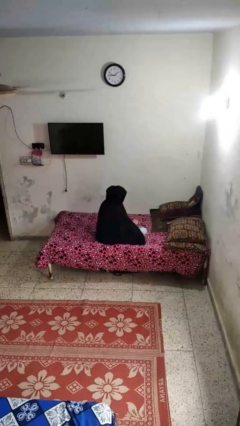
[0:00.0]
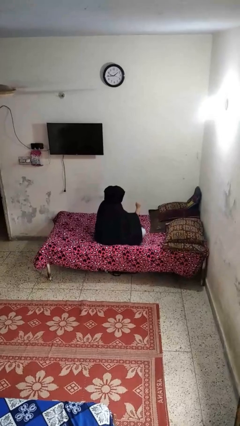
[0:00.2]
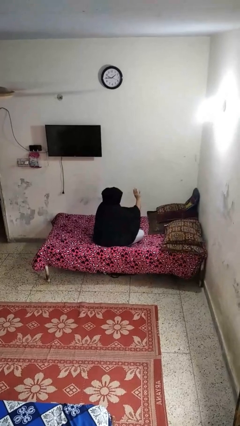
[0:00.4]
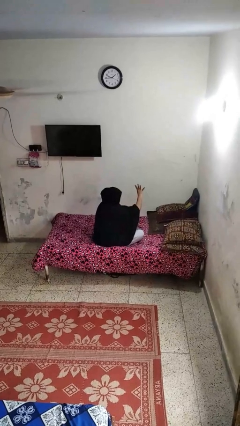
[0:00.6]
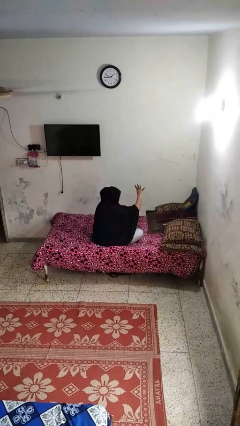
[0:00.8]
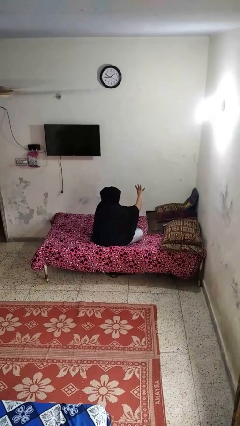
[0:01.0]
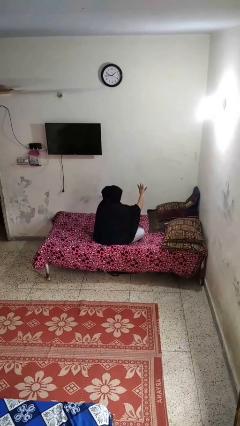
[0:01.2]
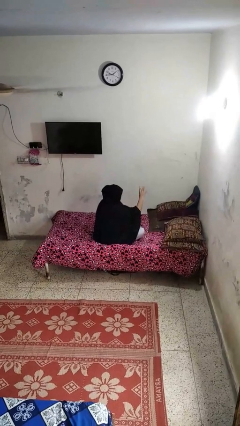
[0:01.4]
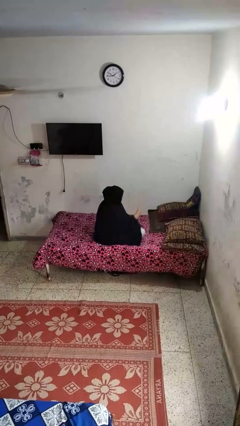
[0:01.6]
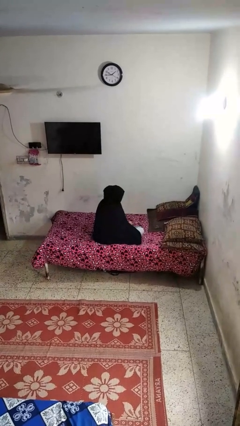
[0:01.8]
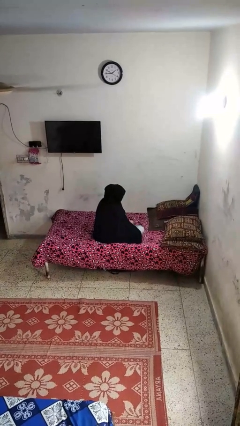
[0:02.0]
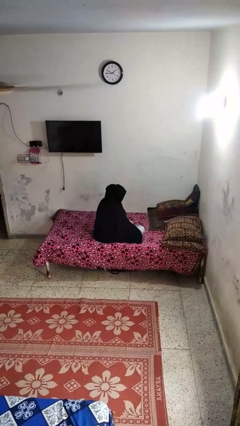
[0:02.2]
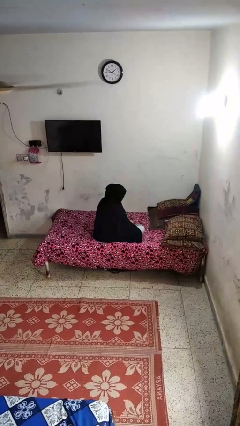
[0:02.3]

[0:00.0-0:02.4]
person gestures number four

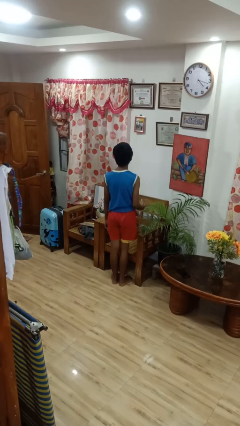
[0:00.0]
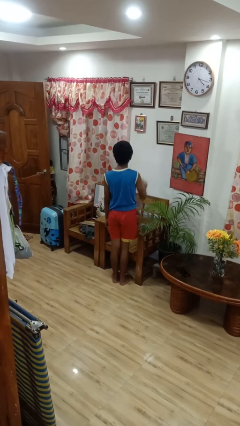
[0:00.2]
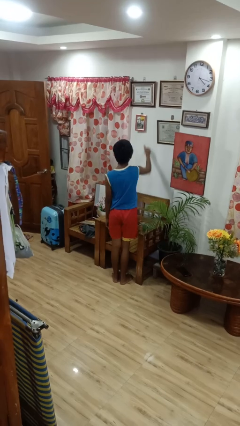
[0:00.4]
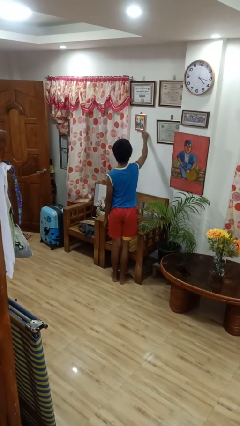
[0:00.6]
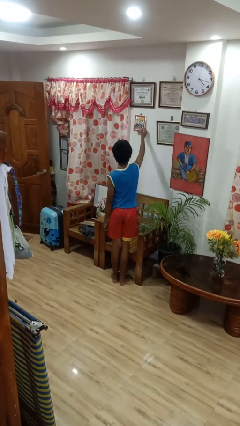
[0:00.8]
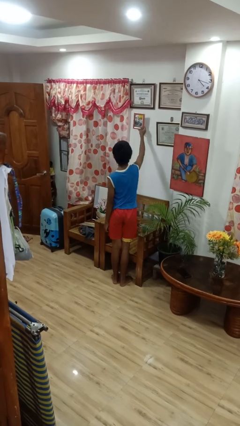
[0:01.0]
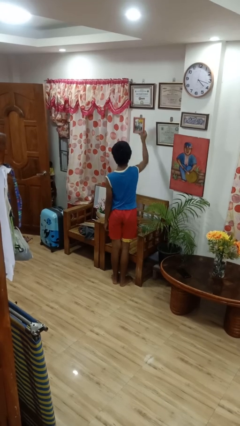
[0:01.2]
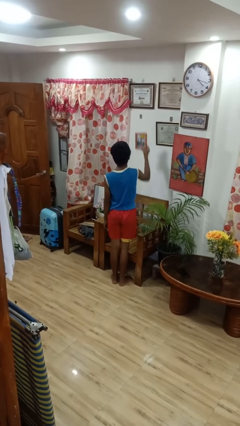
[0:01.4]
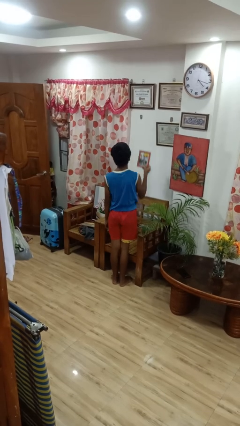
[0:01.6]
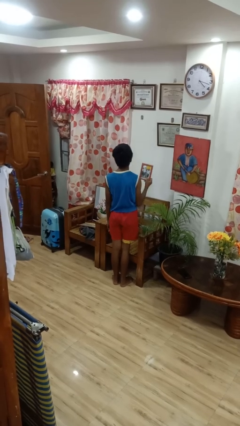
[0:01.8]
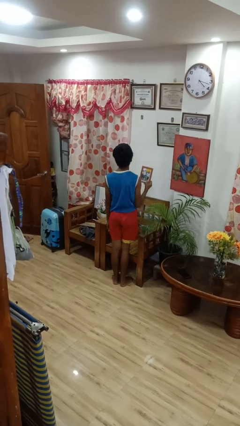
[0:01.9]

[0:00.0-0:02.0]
person takes down picture frame

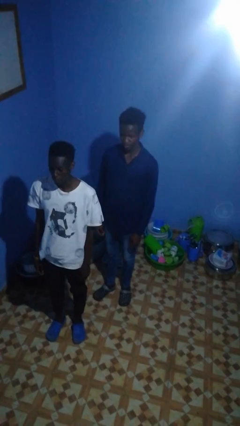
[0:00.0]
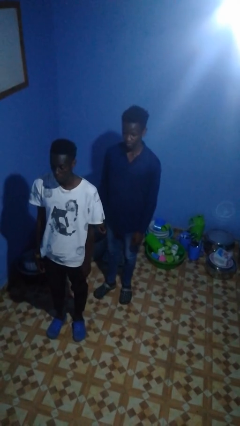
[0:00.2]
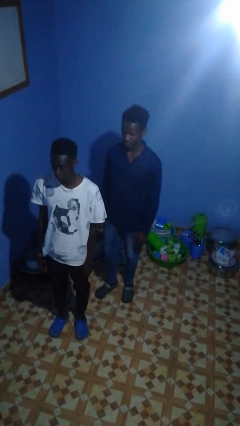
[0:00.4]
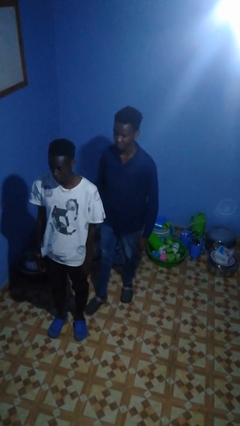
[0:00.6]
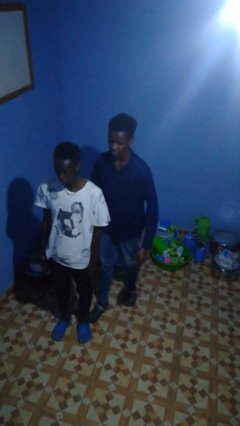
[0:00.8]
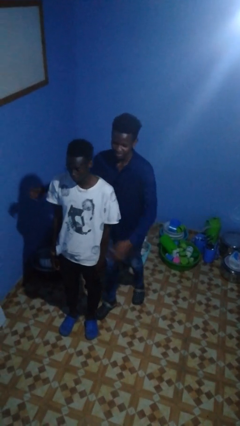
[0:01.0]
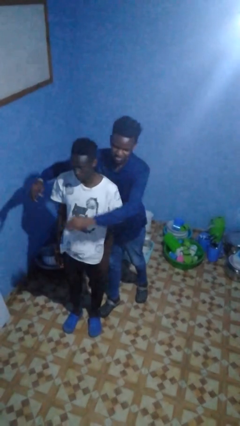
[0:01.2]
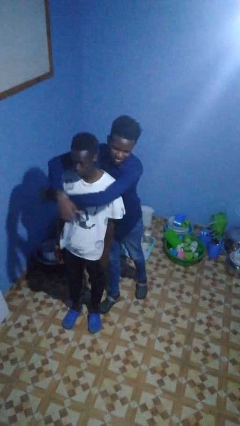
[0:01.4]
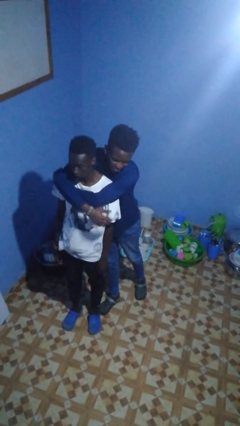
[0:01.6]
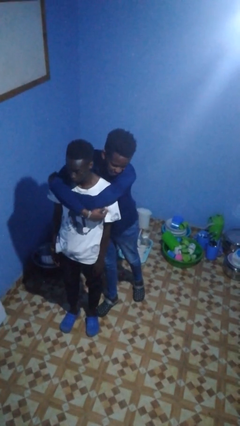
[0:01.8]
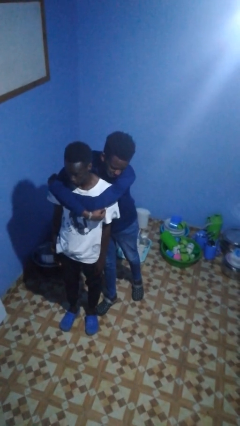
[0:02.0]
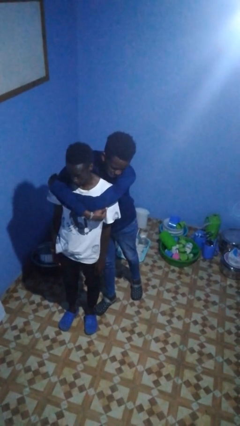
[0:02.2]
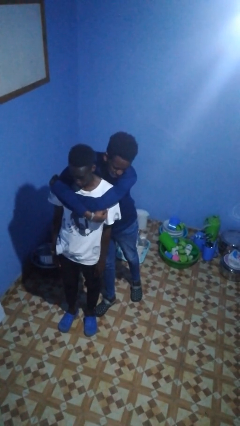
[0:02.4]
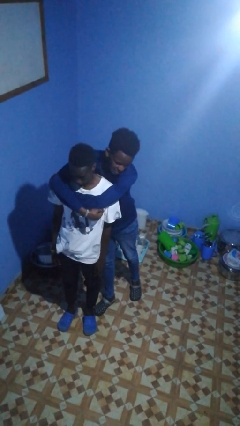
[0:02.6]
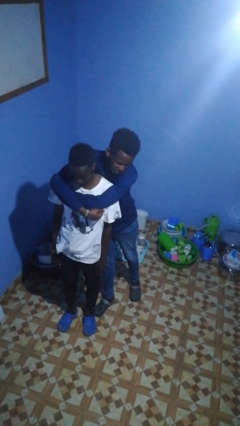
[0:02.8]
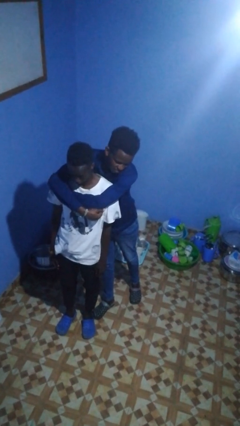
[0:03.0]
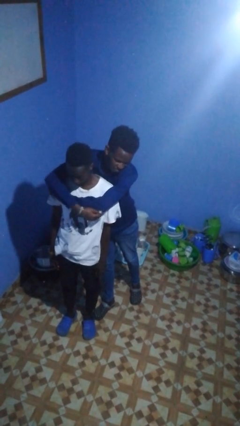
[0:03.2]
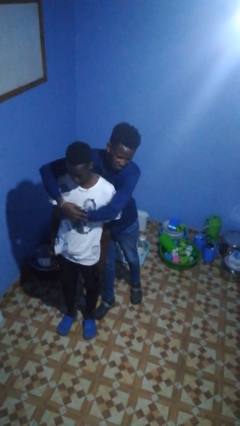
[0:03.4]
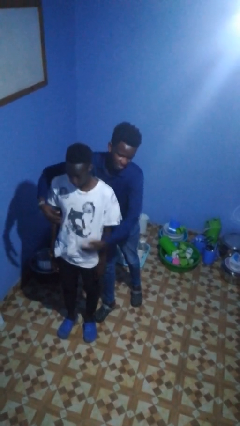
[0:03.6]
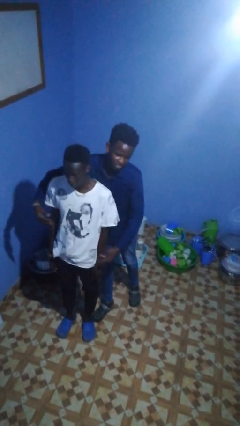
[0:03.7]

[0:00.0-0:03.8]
person hugs person from behind

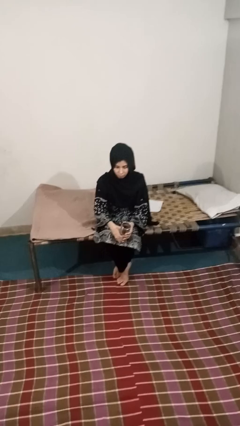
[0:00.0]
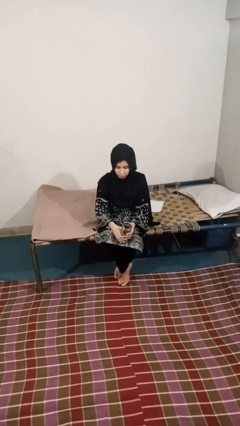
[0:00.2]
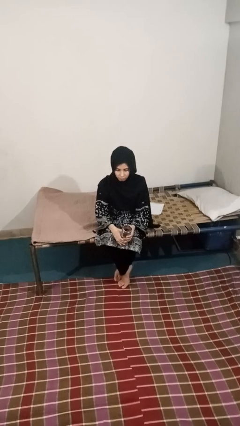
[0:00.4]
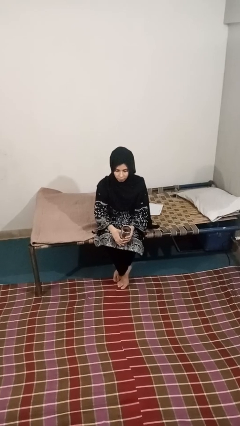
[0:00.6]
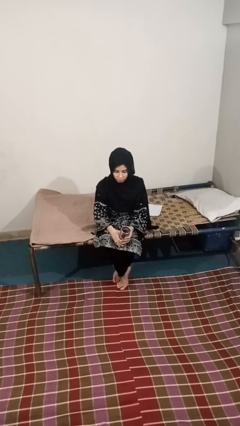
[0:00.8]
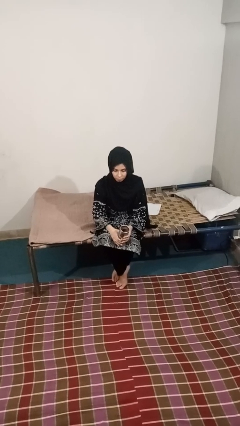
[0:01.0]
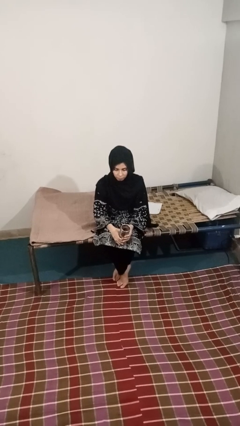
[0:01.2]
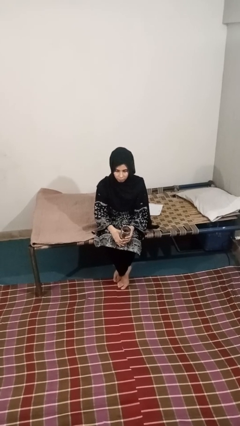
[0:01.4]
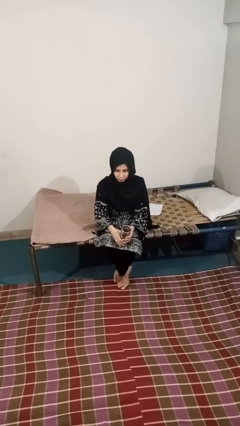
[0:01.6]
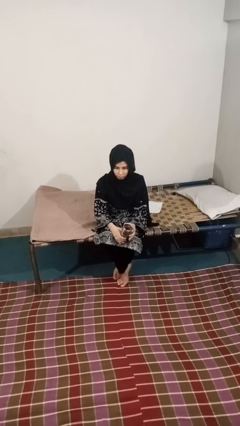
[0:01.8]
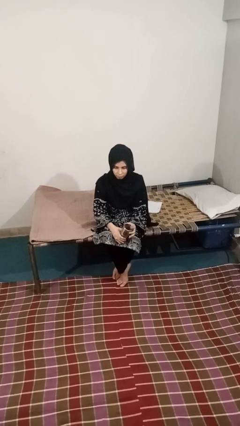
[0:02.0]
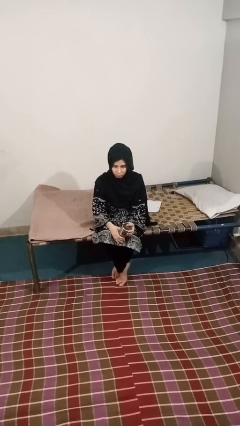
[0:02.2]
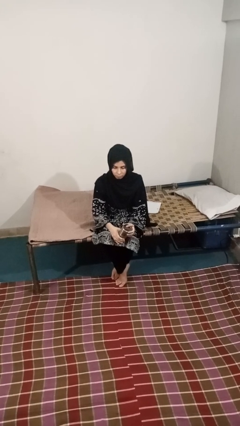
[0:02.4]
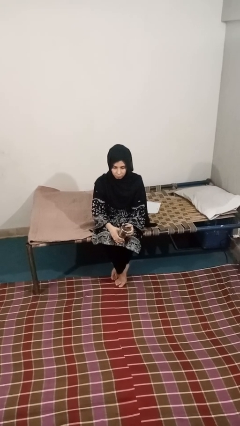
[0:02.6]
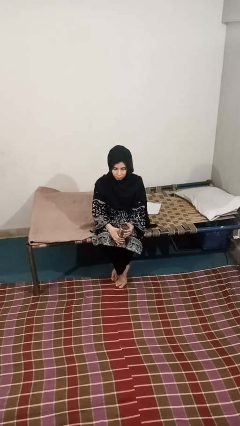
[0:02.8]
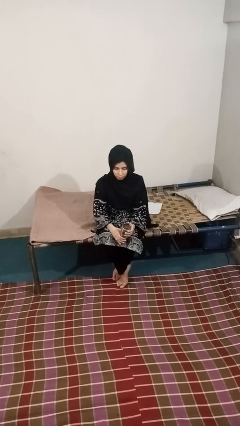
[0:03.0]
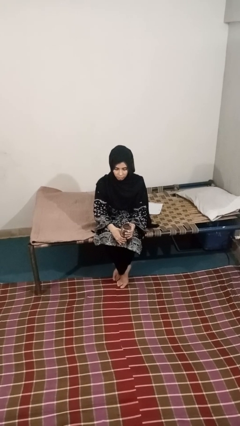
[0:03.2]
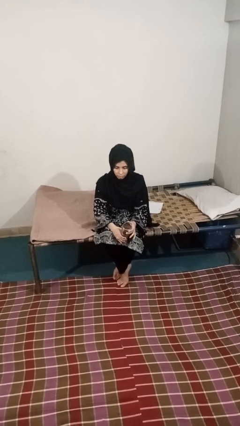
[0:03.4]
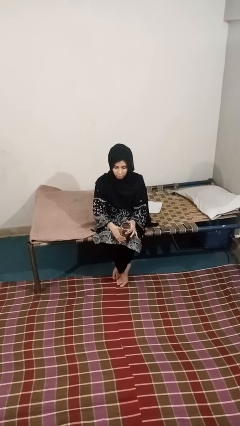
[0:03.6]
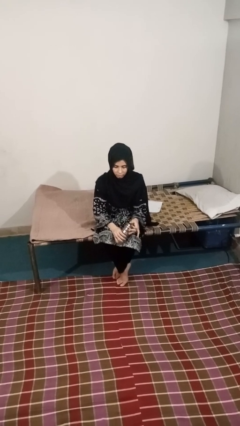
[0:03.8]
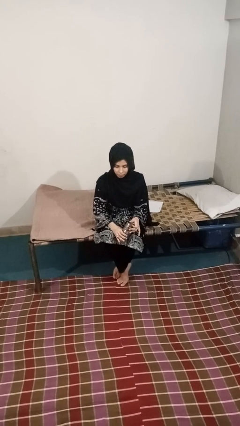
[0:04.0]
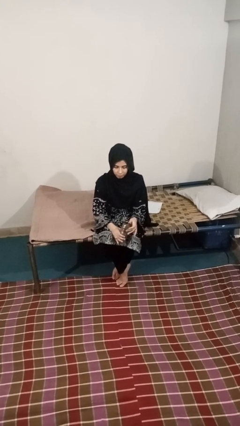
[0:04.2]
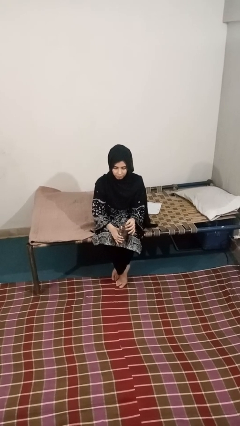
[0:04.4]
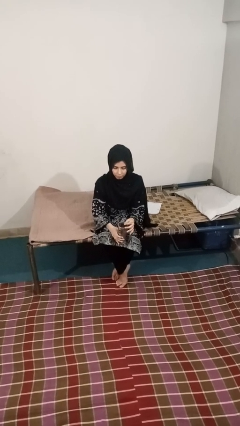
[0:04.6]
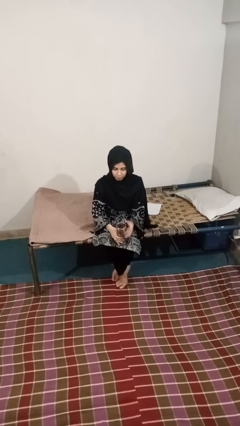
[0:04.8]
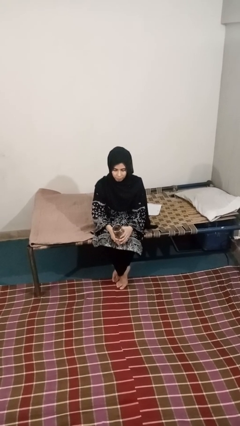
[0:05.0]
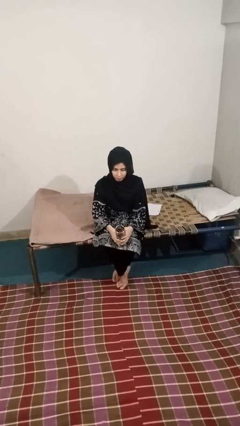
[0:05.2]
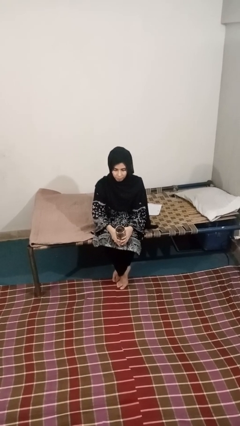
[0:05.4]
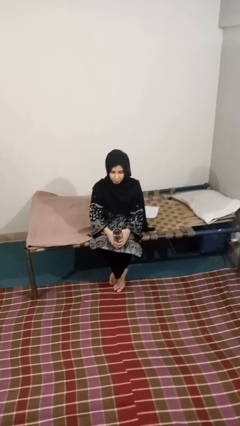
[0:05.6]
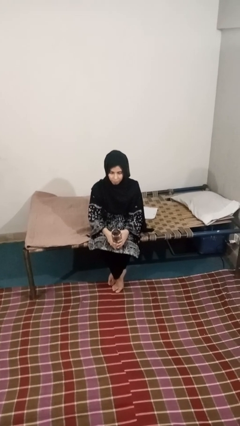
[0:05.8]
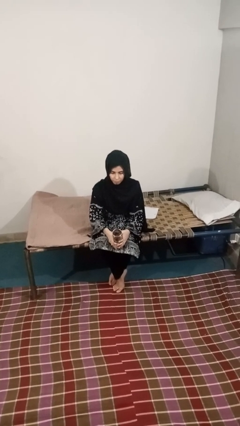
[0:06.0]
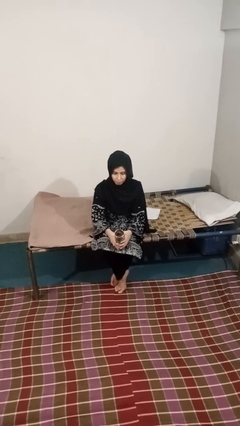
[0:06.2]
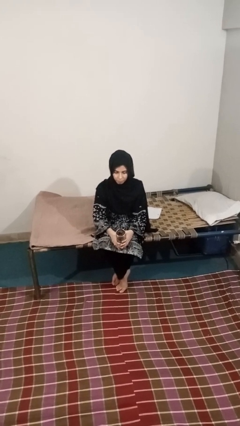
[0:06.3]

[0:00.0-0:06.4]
person opens beverage can

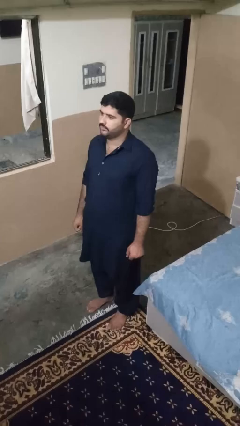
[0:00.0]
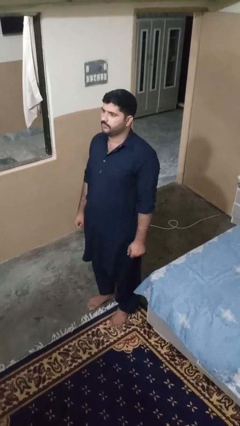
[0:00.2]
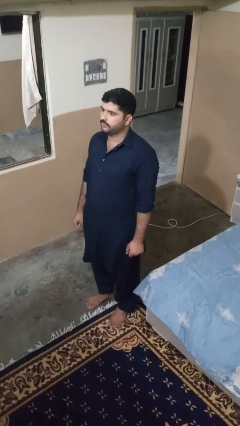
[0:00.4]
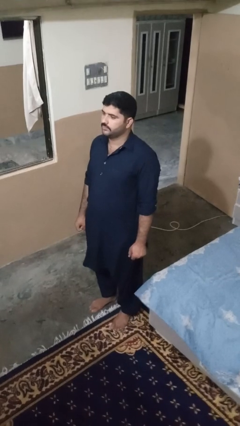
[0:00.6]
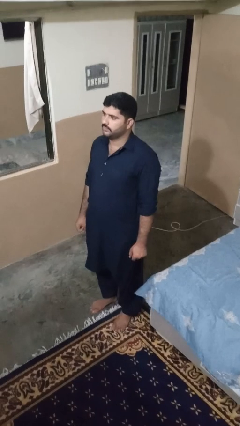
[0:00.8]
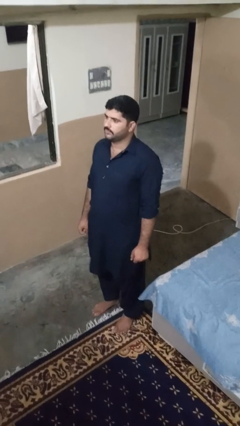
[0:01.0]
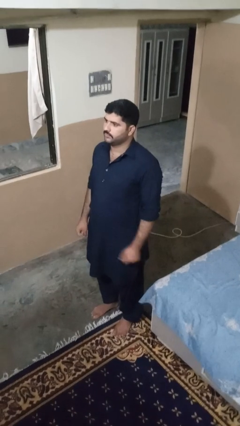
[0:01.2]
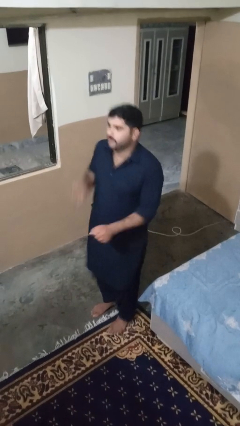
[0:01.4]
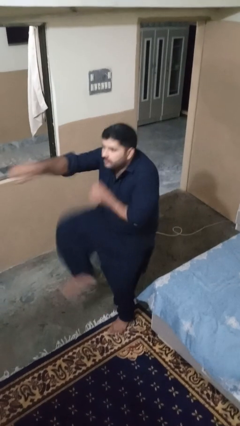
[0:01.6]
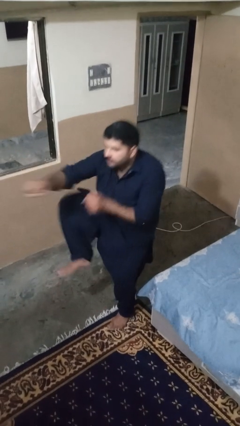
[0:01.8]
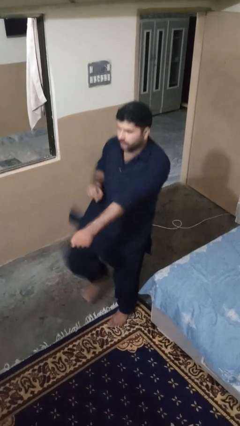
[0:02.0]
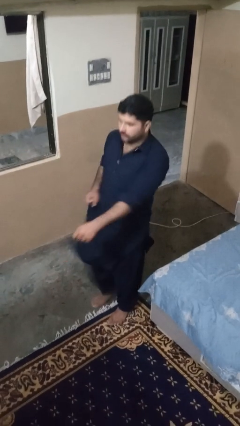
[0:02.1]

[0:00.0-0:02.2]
person karate kicks

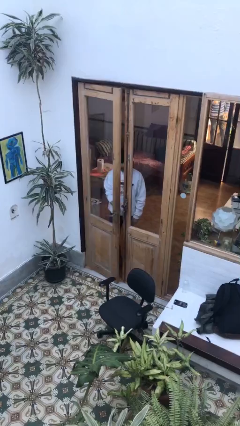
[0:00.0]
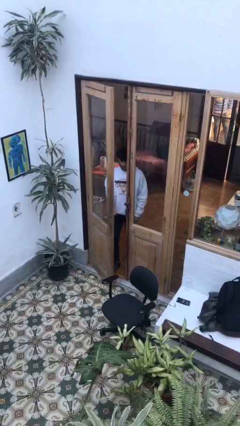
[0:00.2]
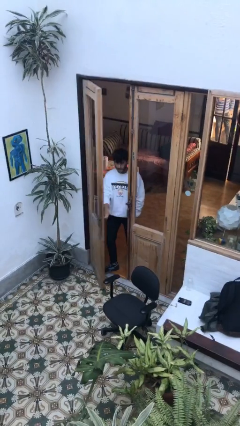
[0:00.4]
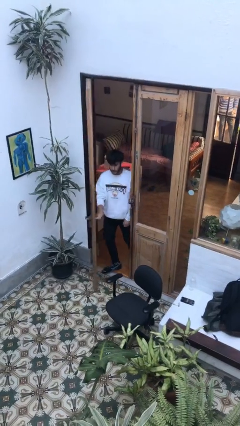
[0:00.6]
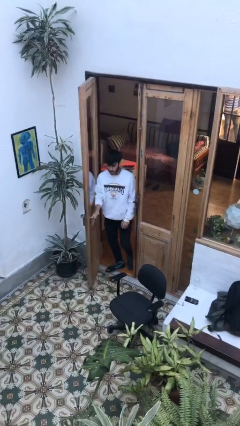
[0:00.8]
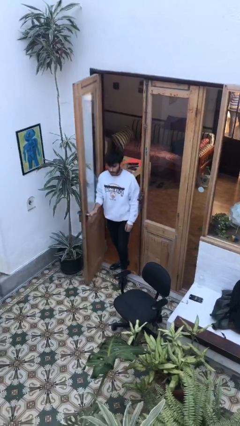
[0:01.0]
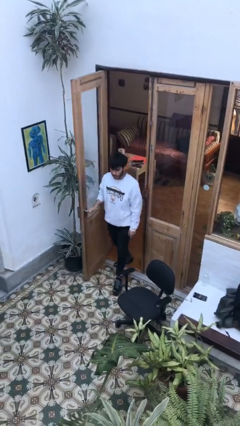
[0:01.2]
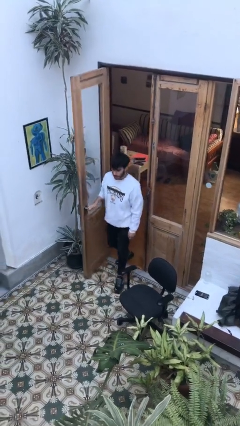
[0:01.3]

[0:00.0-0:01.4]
person opens facility door
